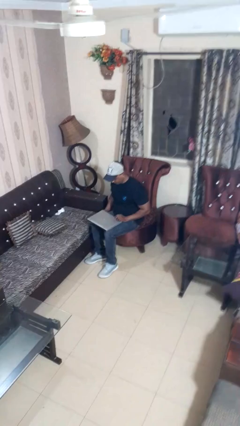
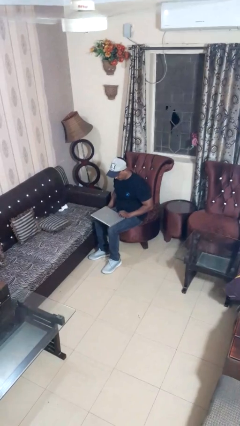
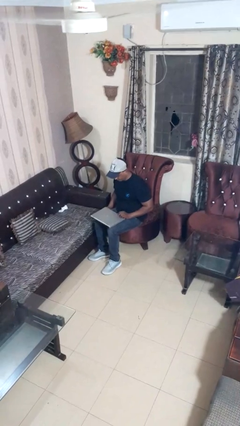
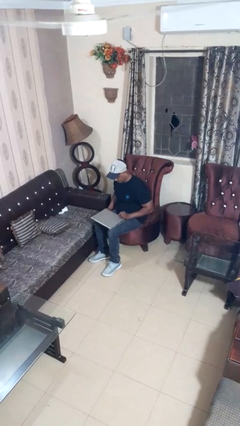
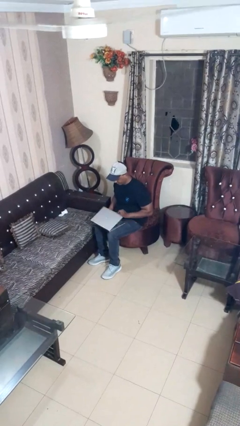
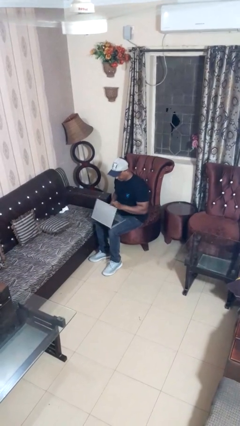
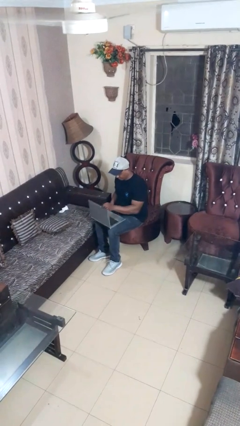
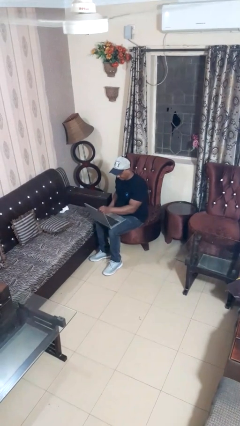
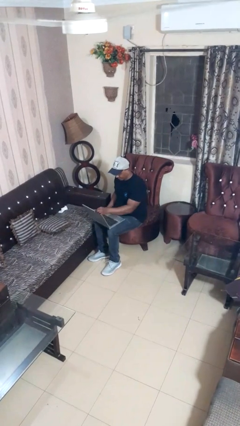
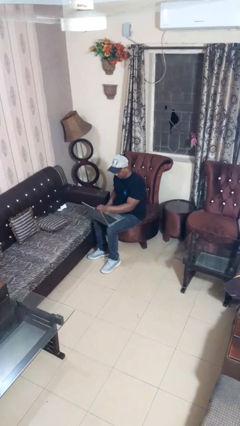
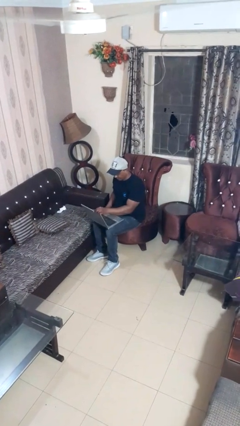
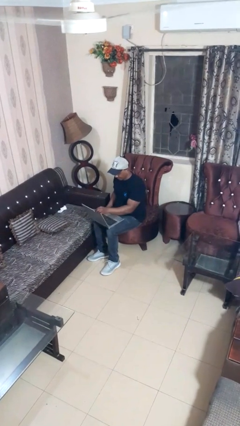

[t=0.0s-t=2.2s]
person opens laptop

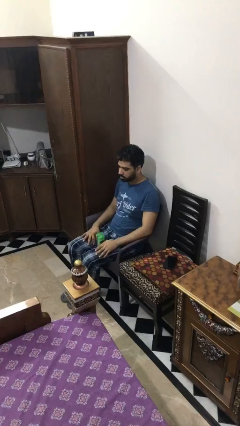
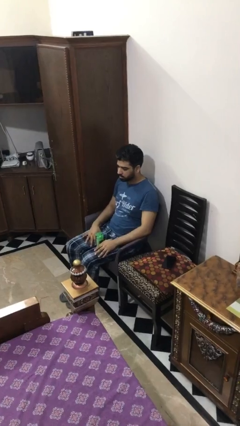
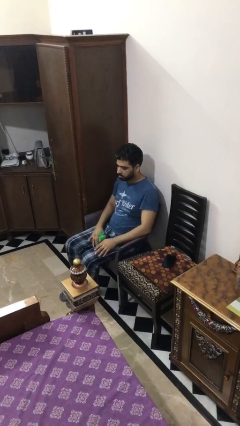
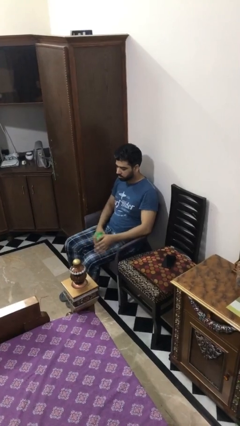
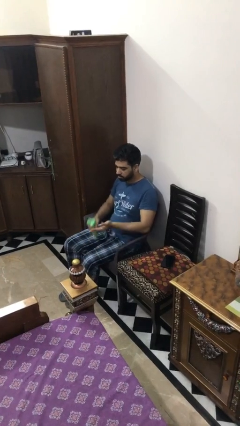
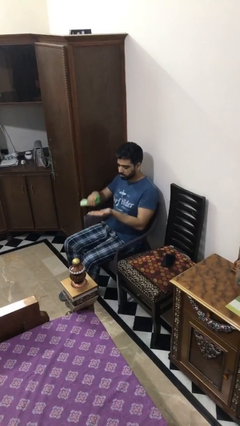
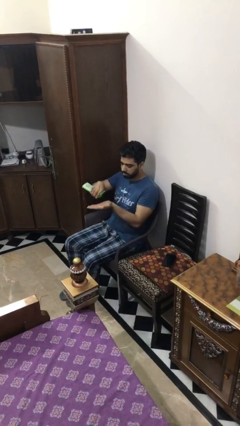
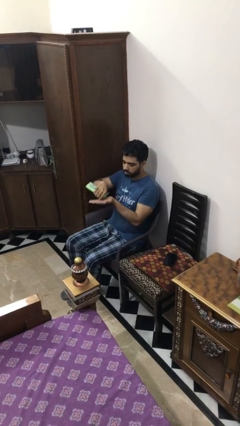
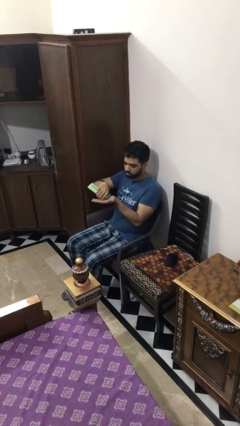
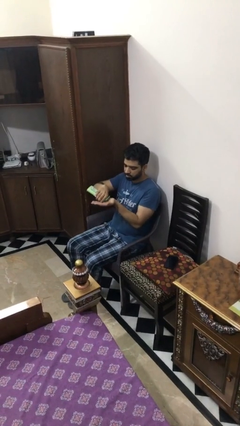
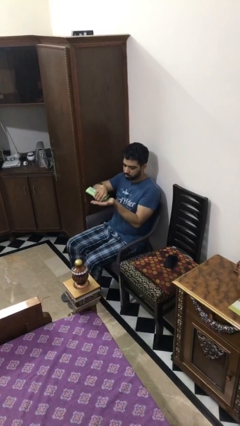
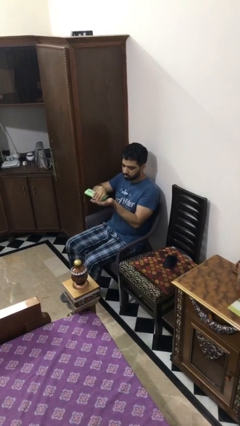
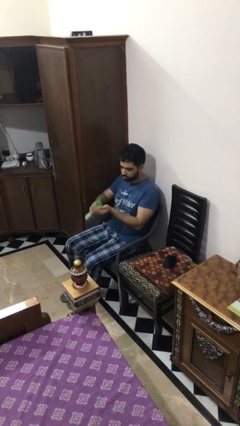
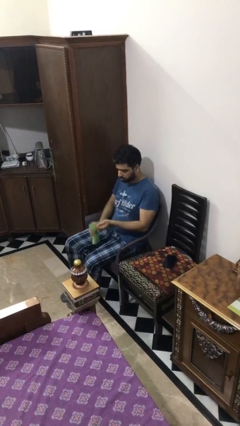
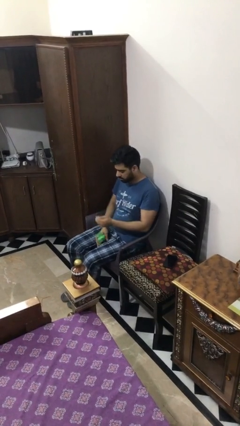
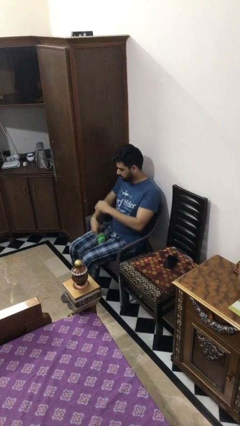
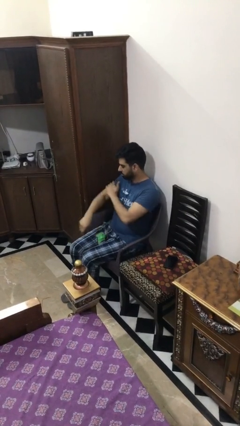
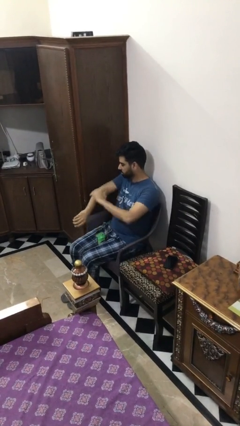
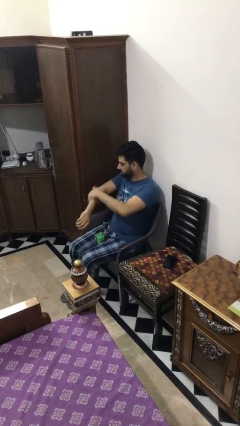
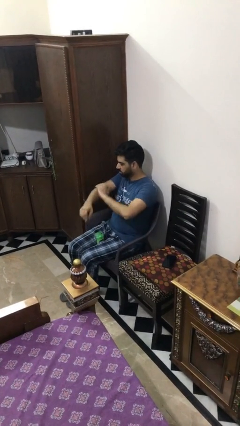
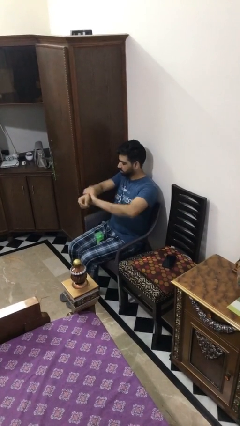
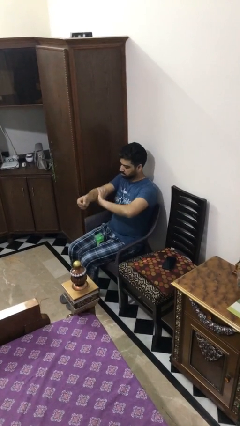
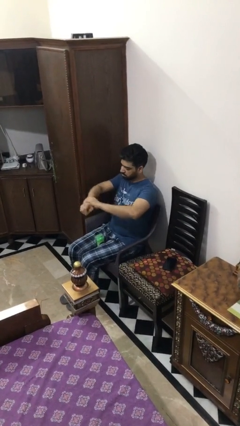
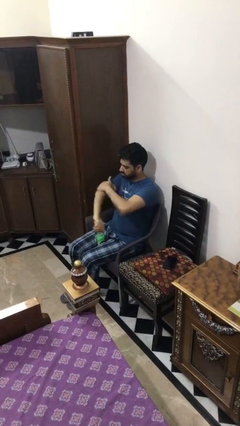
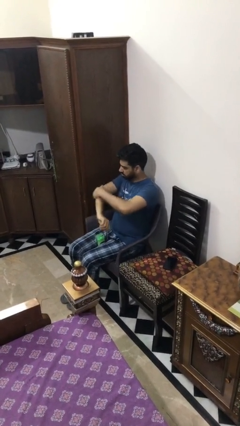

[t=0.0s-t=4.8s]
person applies sunscreen

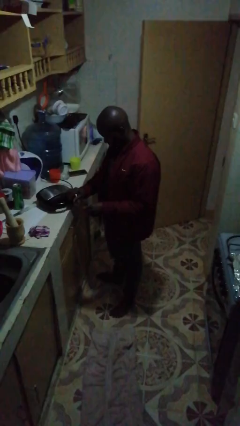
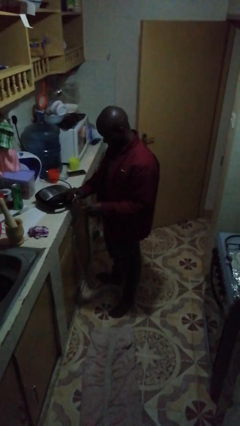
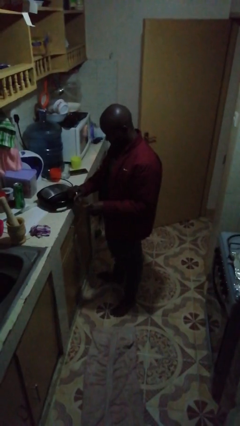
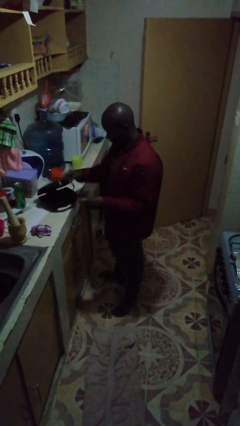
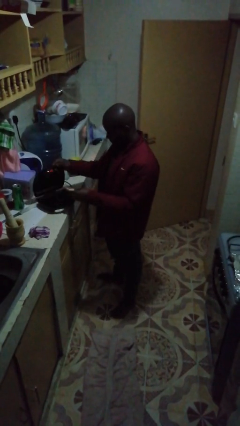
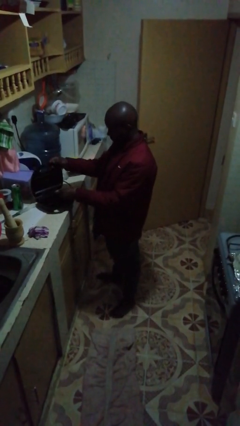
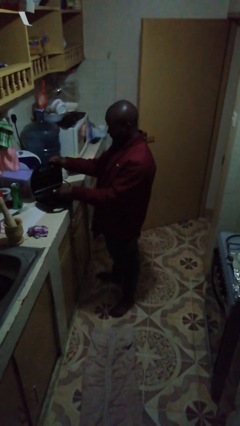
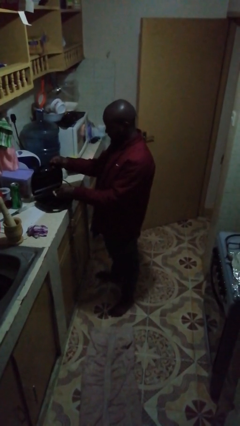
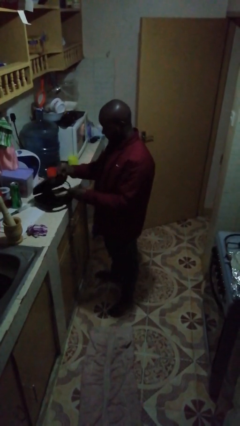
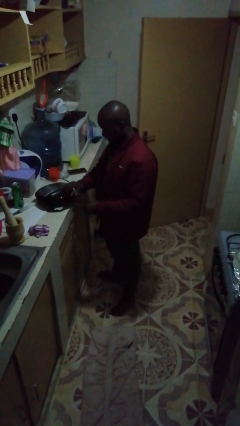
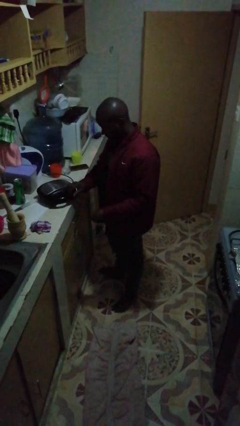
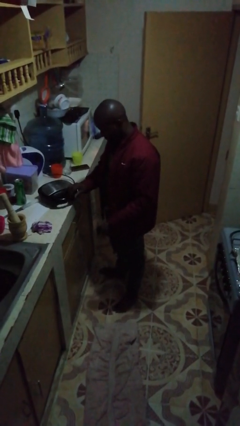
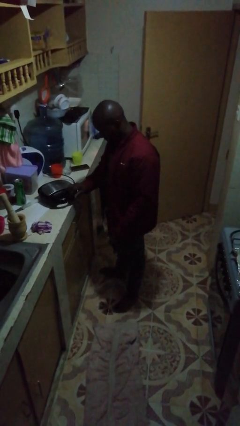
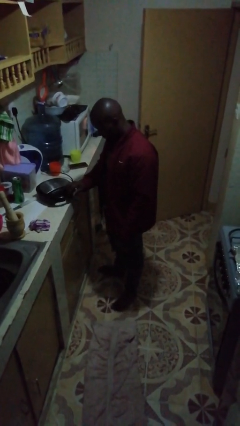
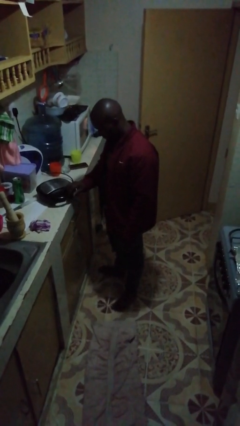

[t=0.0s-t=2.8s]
person puts object into toaster

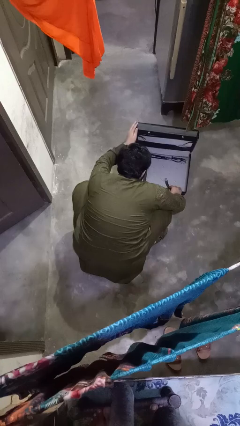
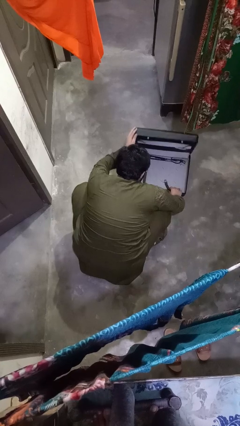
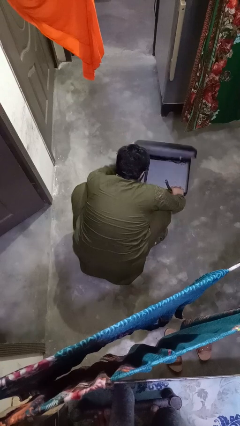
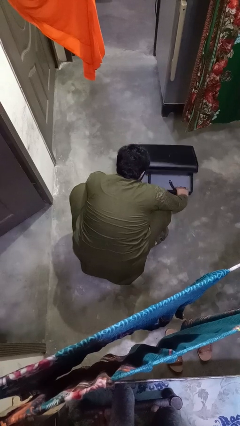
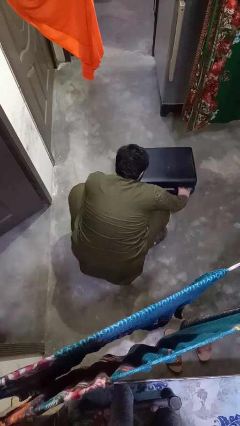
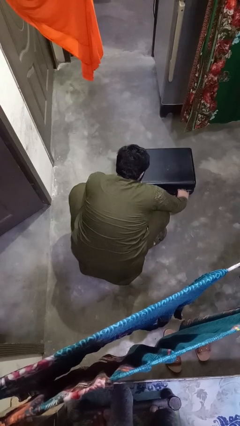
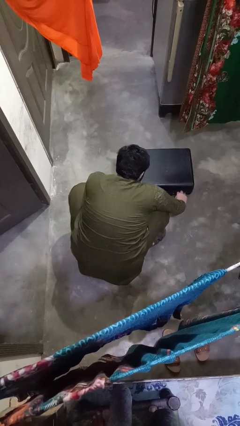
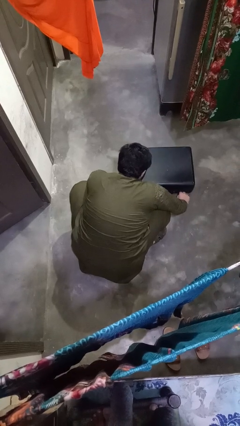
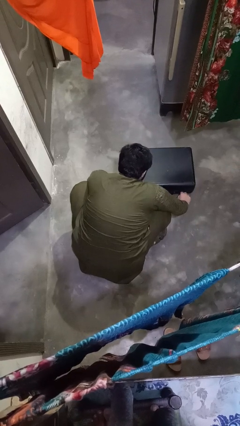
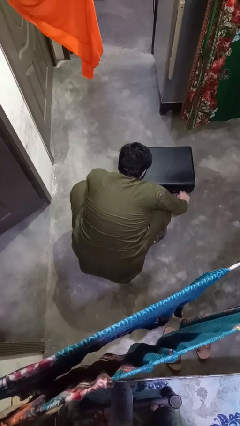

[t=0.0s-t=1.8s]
person closes suitcase

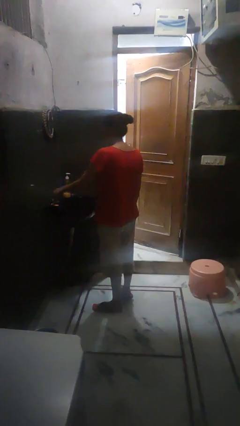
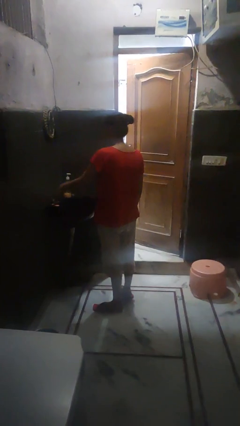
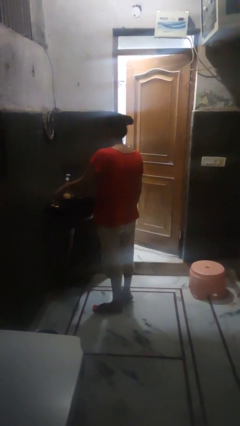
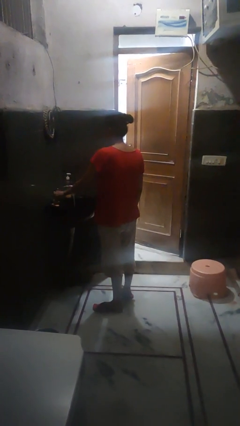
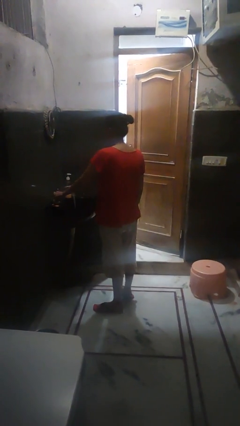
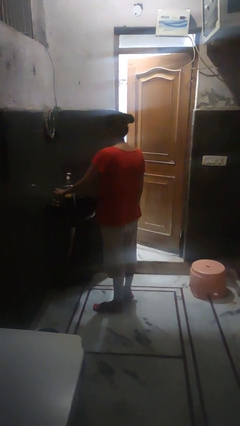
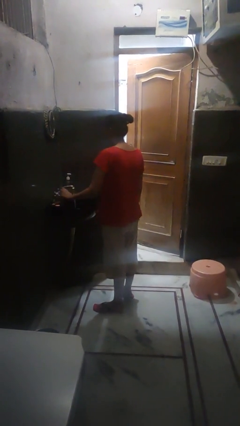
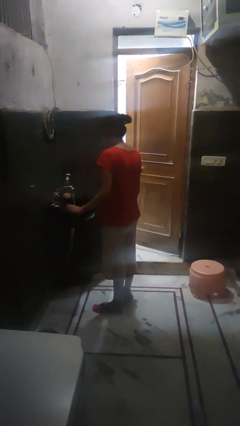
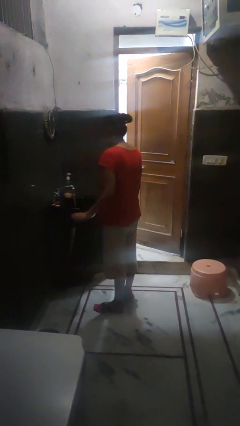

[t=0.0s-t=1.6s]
person turns on faucet

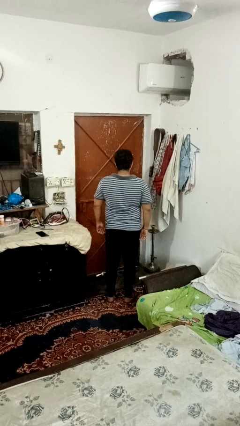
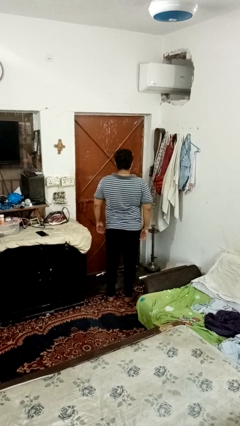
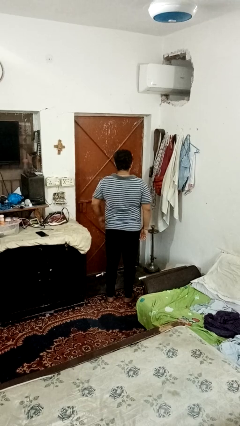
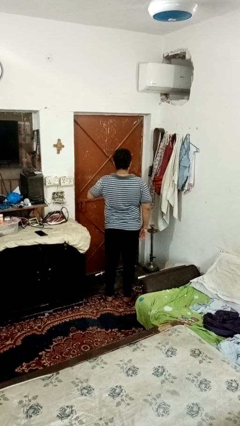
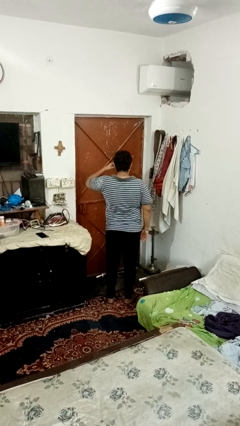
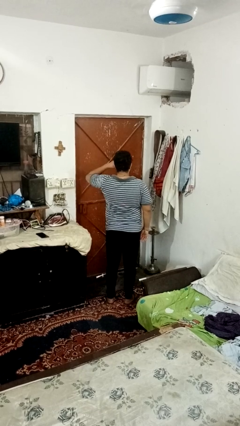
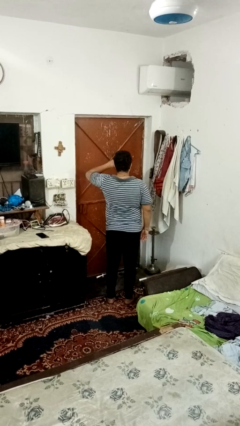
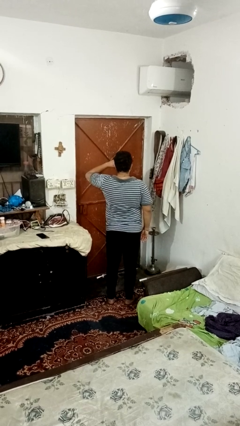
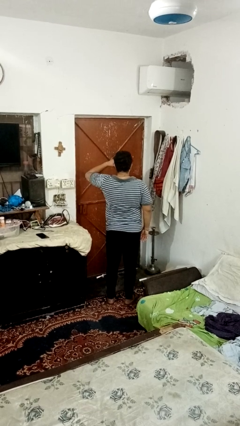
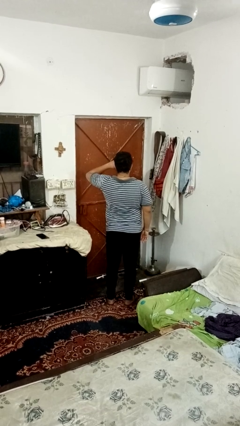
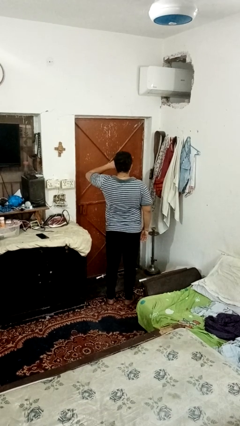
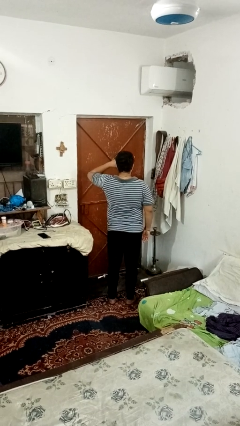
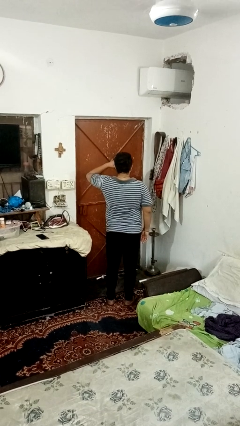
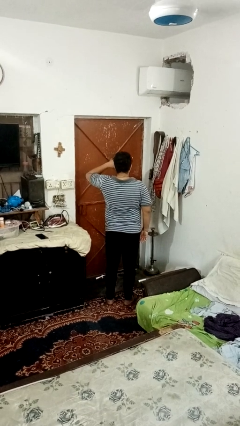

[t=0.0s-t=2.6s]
person rubs eyes

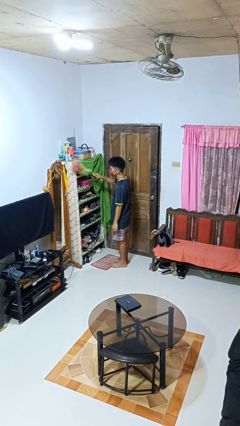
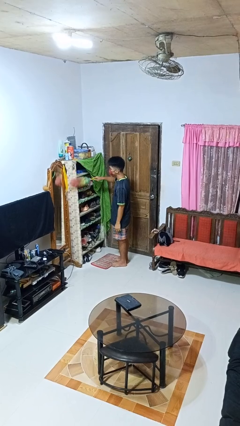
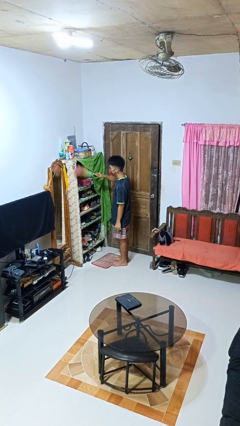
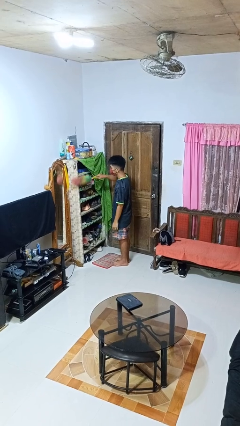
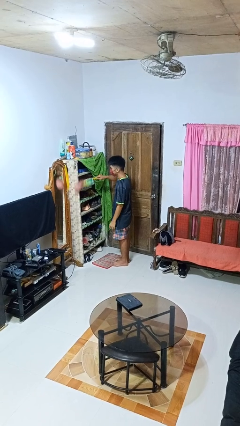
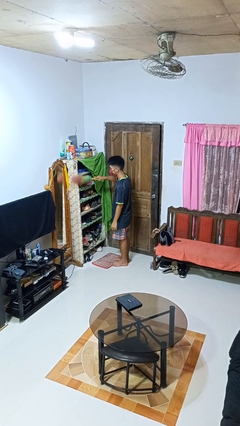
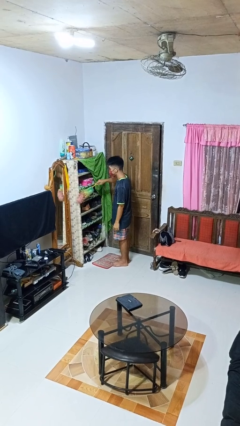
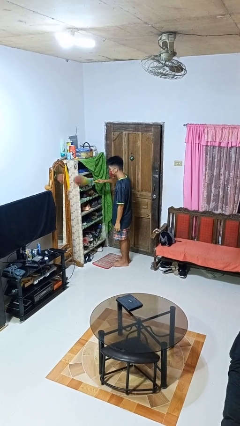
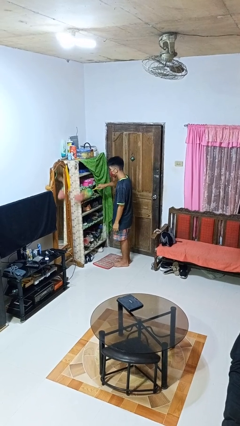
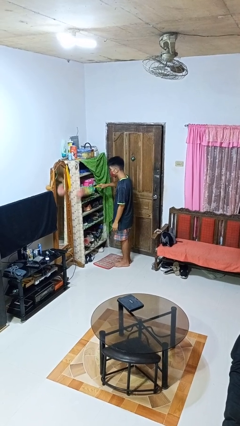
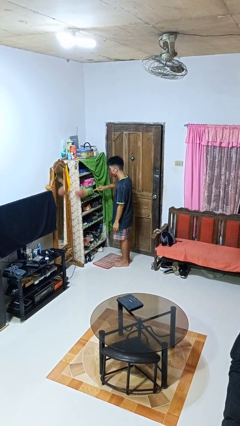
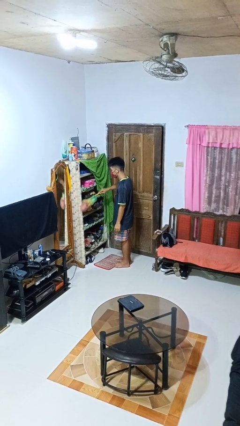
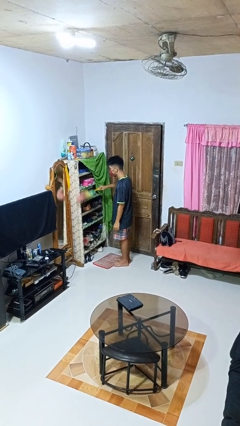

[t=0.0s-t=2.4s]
person dusts furniture
